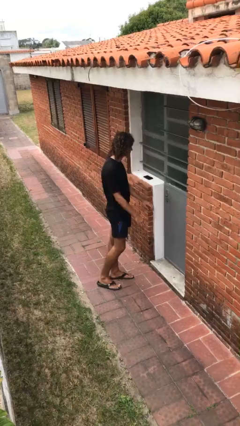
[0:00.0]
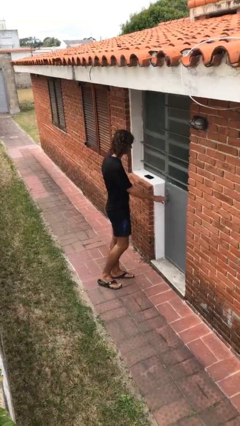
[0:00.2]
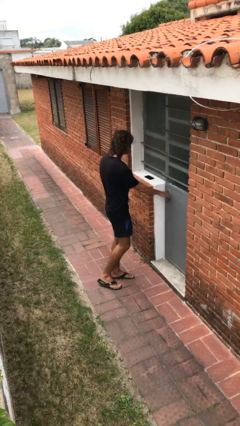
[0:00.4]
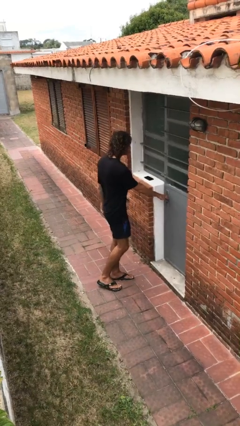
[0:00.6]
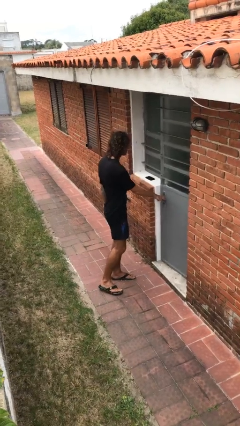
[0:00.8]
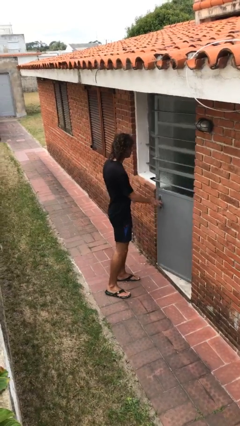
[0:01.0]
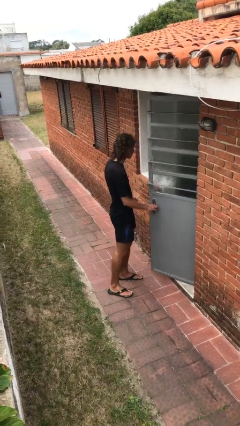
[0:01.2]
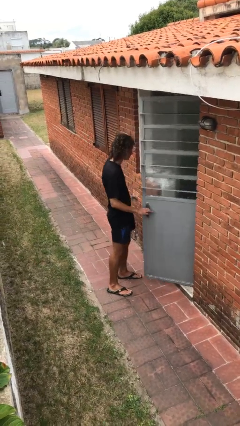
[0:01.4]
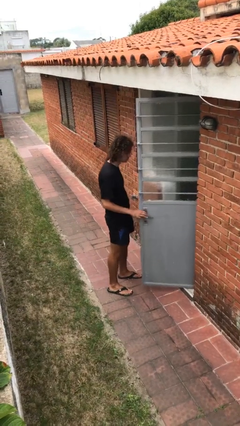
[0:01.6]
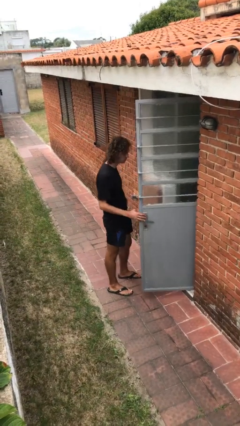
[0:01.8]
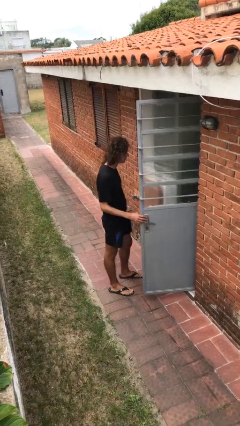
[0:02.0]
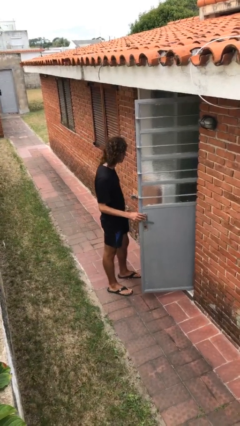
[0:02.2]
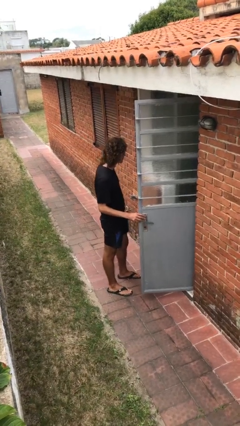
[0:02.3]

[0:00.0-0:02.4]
person opens facility door

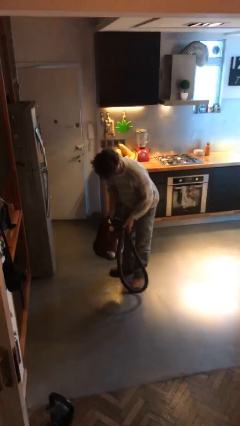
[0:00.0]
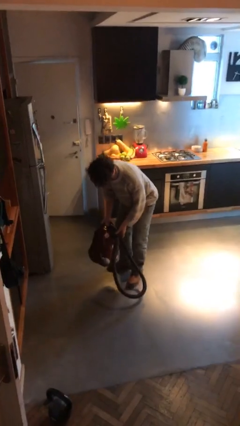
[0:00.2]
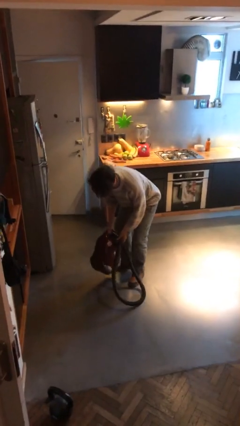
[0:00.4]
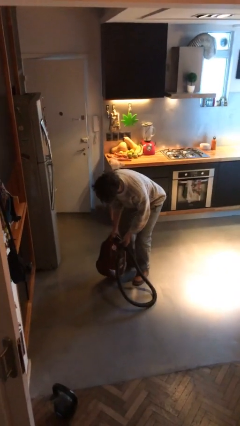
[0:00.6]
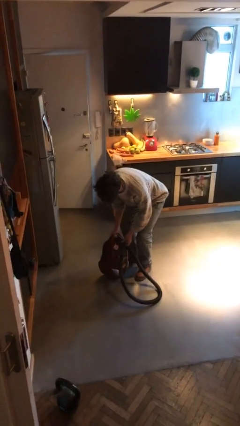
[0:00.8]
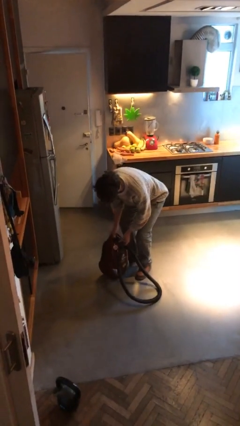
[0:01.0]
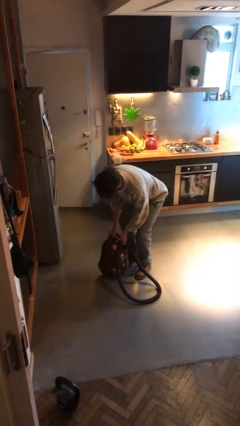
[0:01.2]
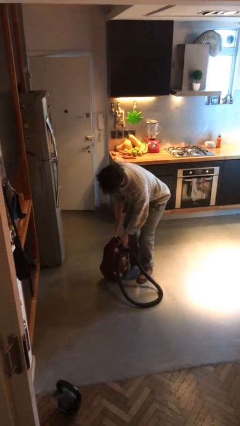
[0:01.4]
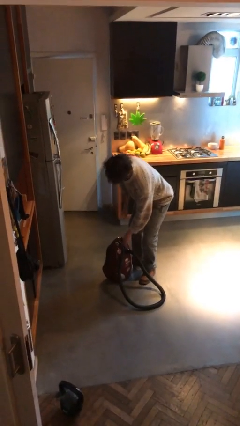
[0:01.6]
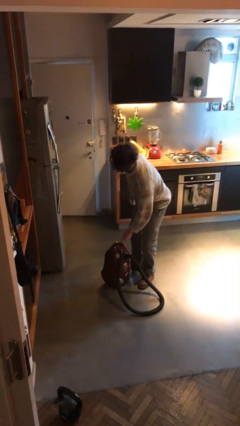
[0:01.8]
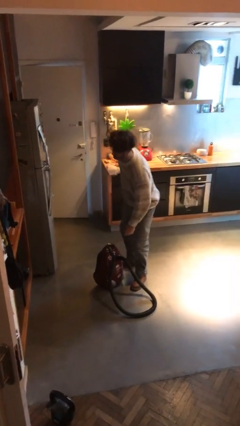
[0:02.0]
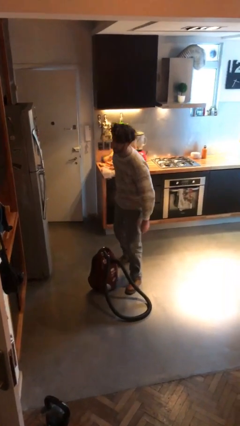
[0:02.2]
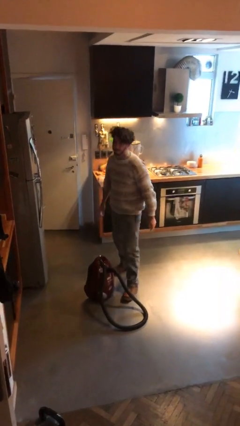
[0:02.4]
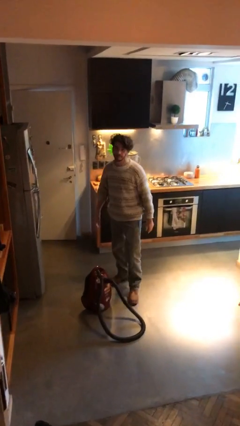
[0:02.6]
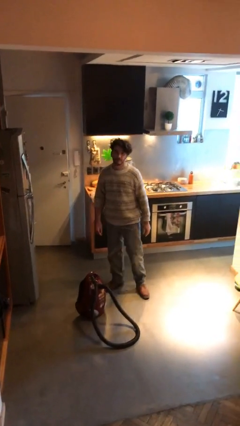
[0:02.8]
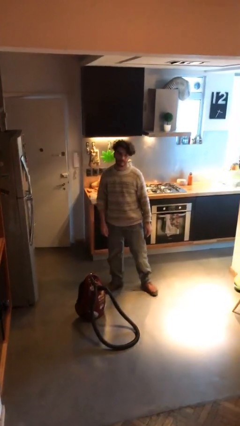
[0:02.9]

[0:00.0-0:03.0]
person puts down object on floor

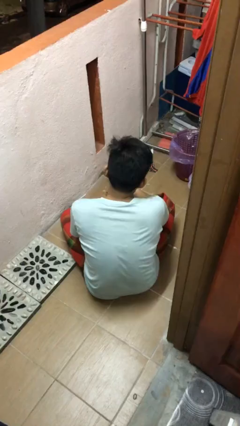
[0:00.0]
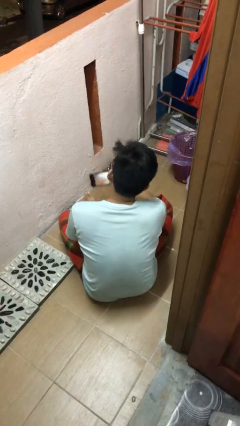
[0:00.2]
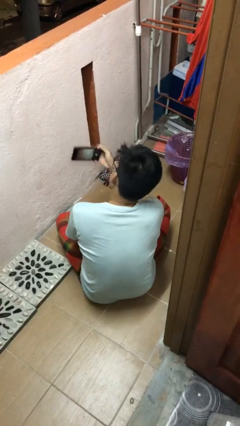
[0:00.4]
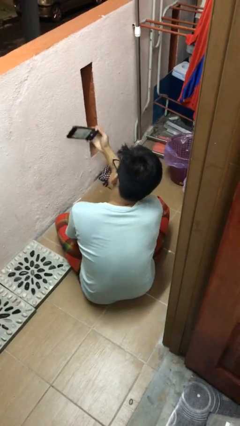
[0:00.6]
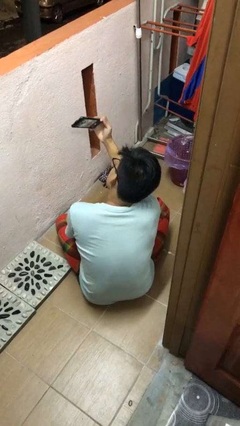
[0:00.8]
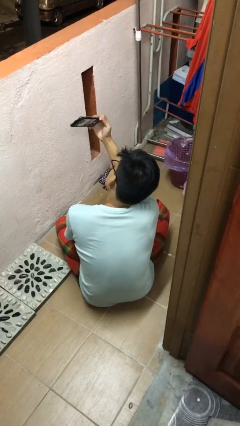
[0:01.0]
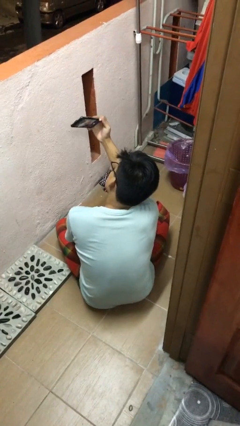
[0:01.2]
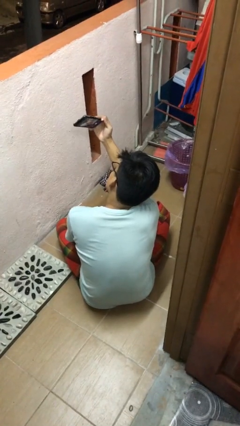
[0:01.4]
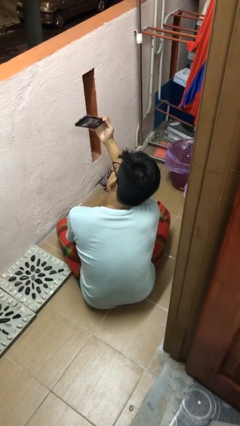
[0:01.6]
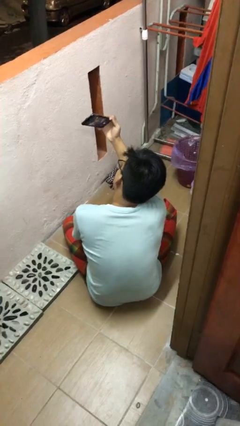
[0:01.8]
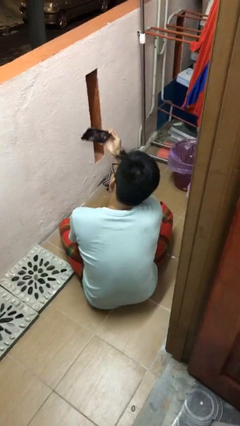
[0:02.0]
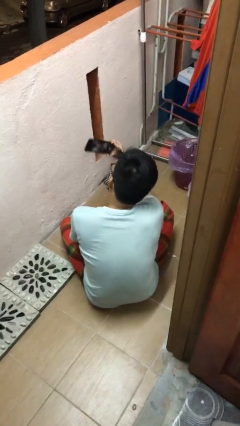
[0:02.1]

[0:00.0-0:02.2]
person takes selfie

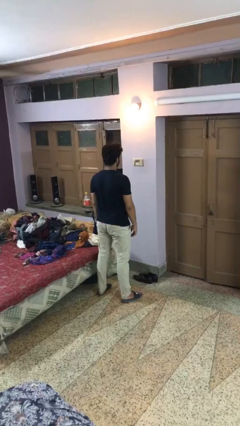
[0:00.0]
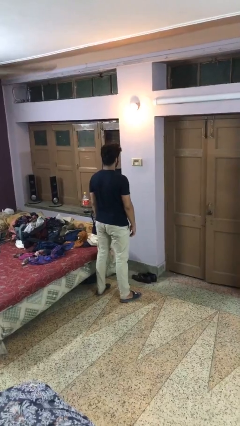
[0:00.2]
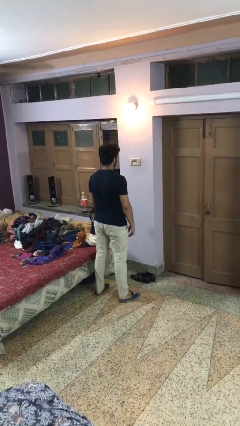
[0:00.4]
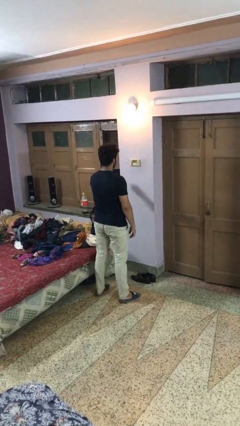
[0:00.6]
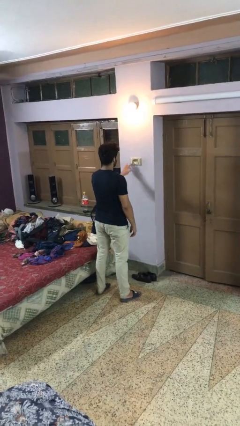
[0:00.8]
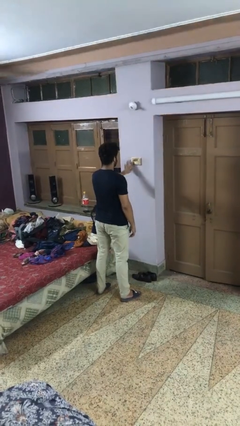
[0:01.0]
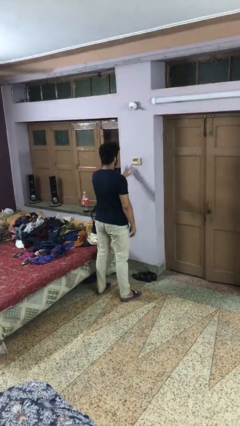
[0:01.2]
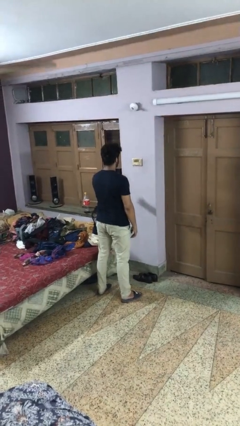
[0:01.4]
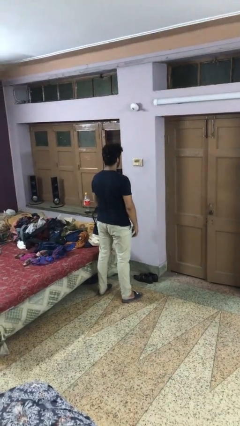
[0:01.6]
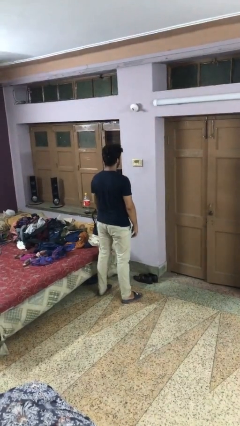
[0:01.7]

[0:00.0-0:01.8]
person turns off lamp

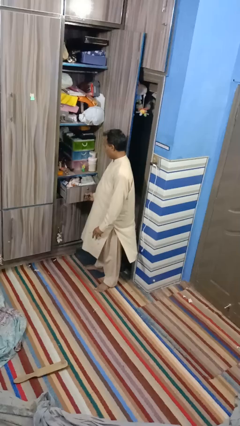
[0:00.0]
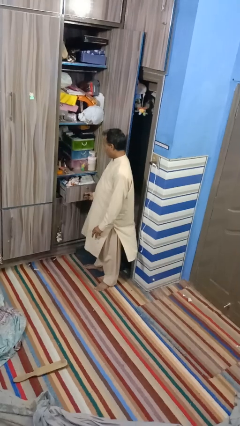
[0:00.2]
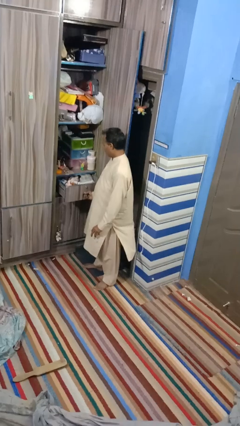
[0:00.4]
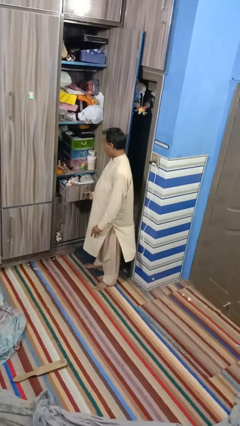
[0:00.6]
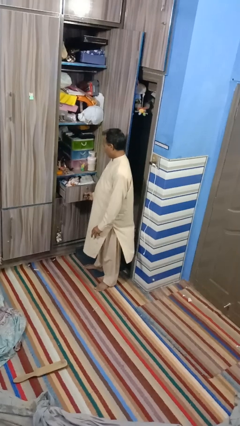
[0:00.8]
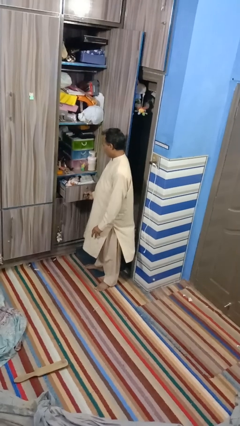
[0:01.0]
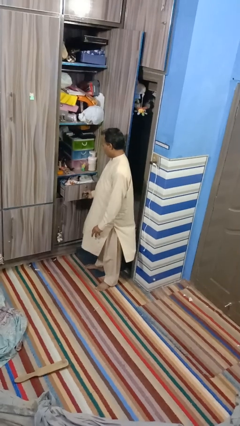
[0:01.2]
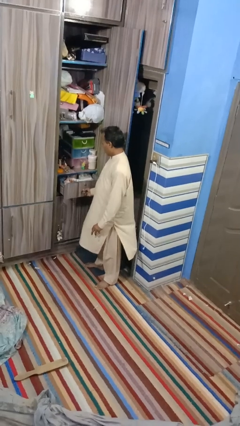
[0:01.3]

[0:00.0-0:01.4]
person closes dresser drawer

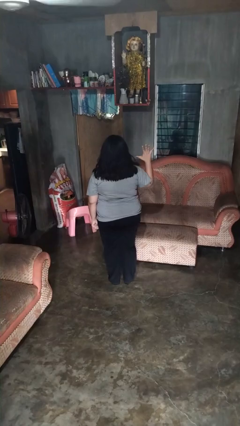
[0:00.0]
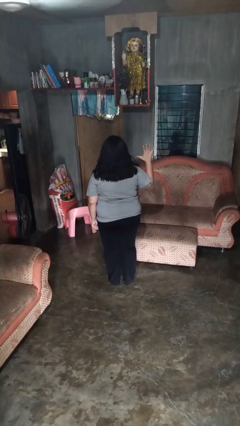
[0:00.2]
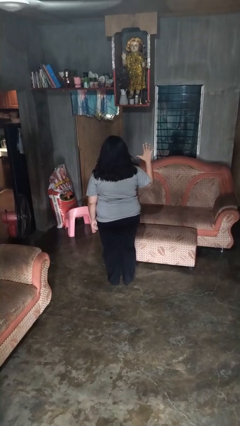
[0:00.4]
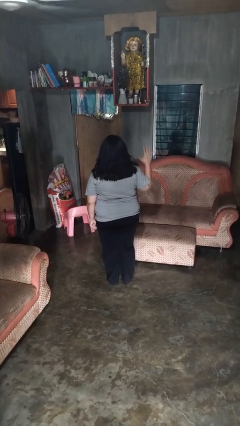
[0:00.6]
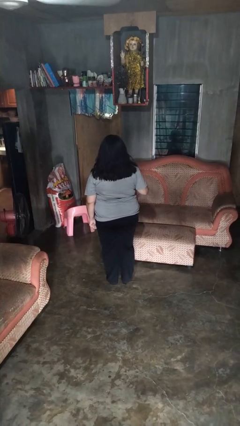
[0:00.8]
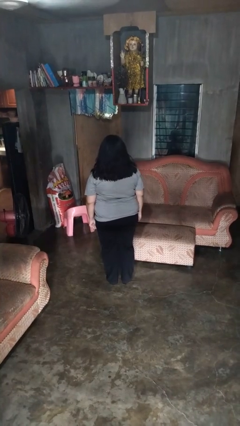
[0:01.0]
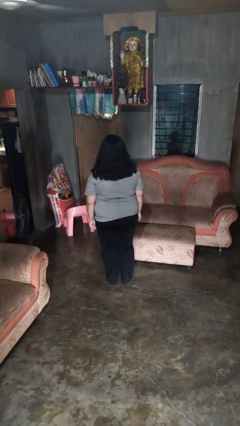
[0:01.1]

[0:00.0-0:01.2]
person gestures number five

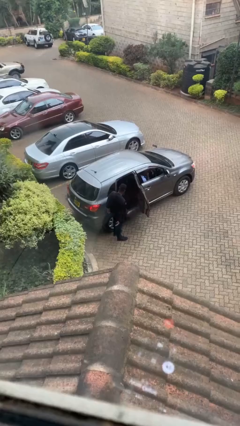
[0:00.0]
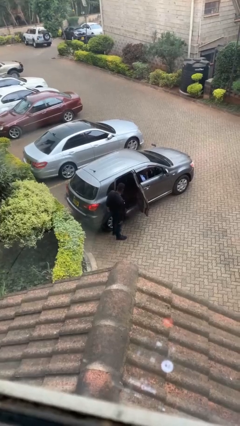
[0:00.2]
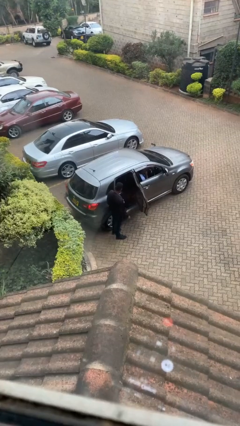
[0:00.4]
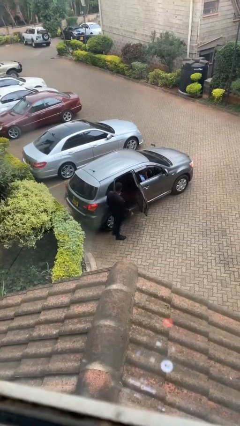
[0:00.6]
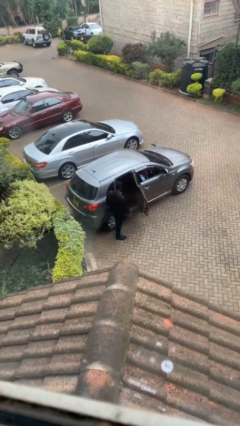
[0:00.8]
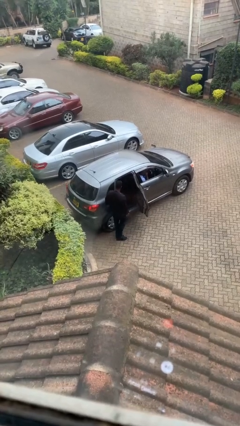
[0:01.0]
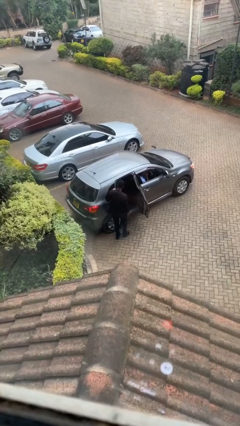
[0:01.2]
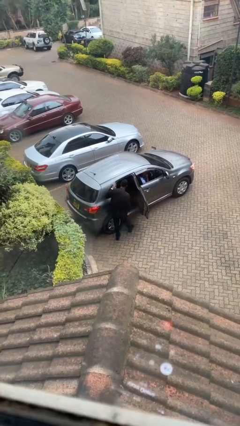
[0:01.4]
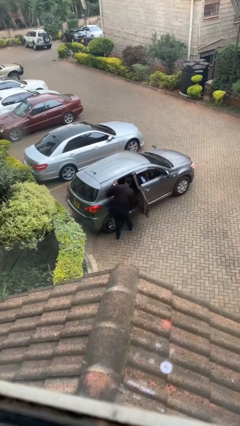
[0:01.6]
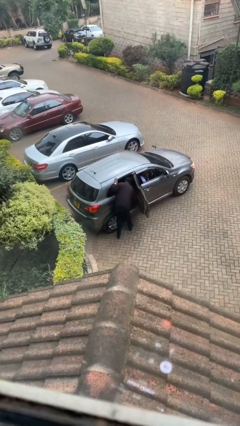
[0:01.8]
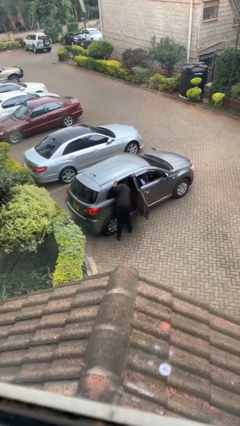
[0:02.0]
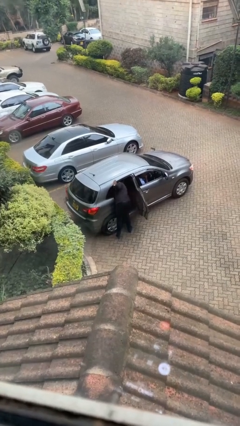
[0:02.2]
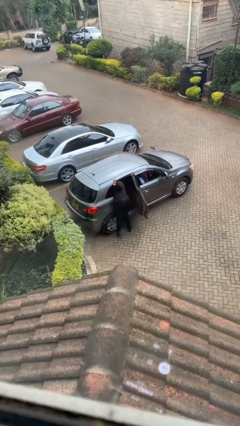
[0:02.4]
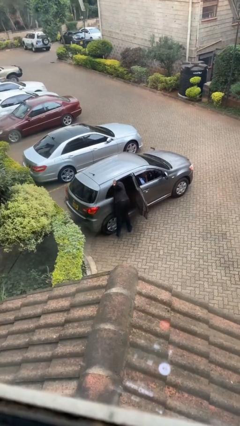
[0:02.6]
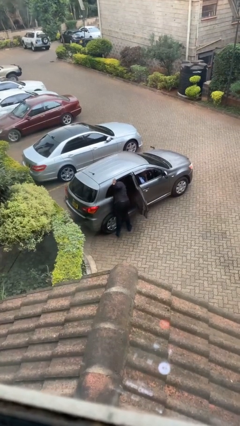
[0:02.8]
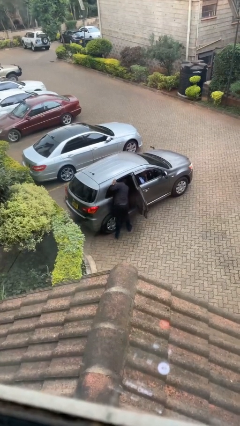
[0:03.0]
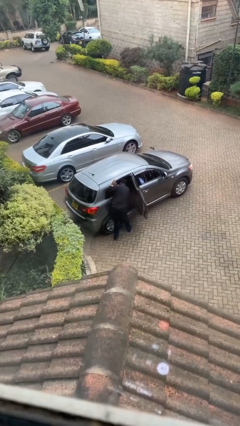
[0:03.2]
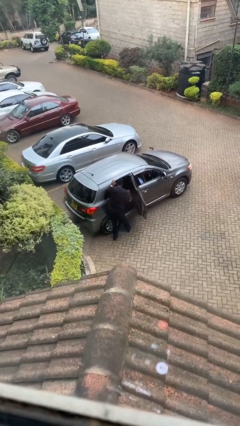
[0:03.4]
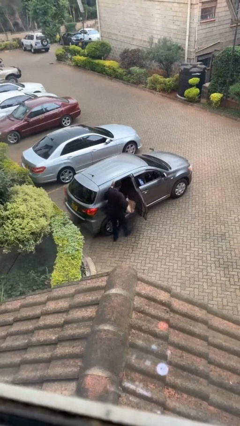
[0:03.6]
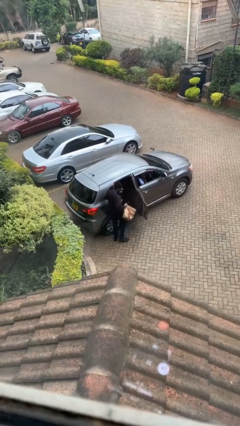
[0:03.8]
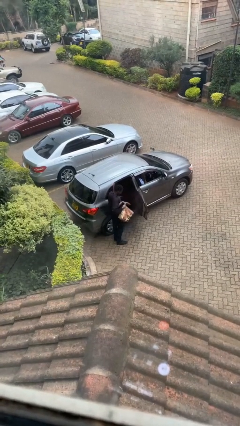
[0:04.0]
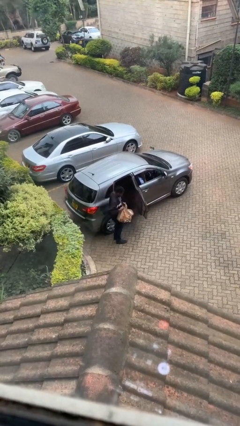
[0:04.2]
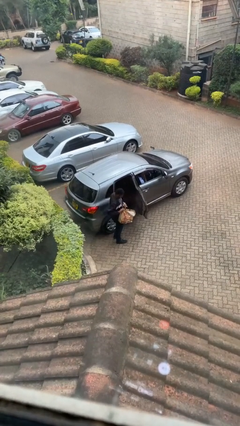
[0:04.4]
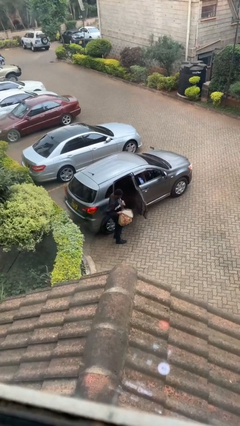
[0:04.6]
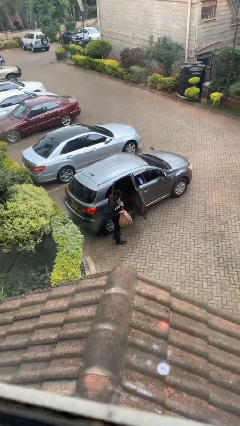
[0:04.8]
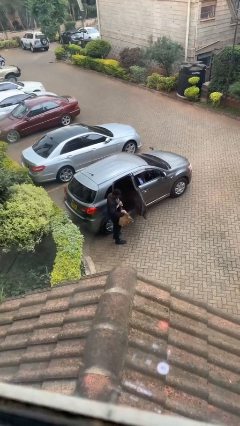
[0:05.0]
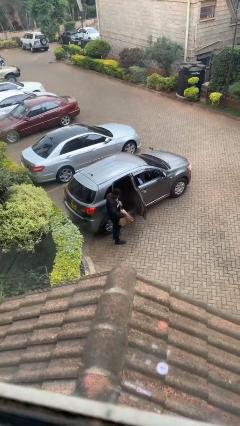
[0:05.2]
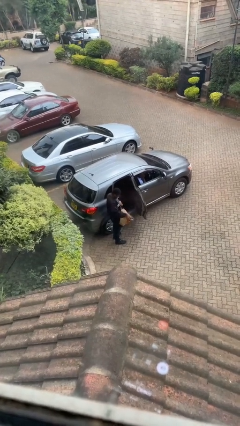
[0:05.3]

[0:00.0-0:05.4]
person unloads car
